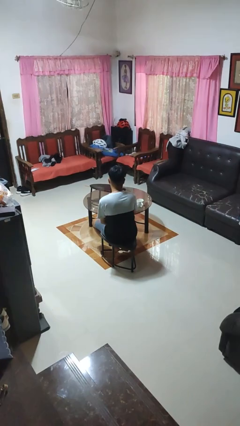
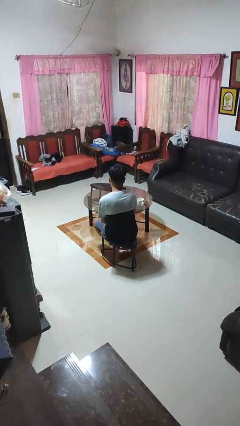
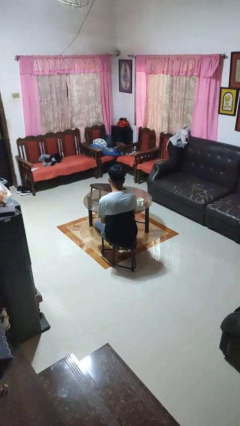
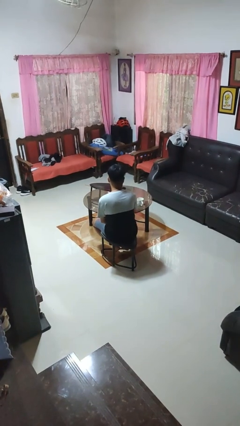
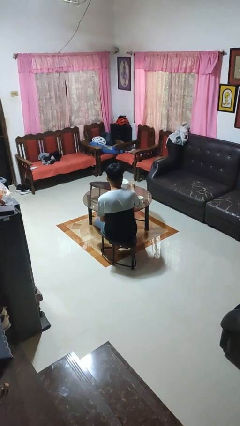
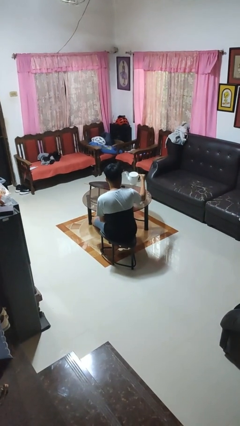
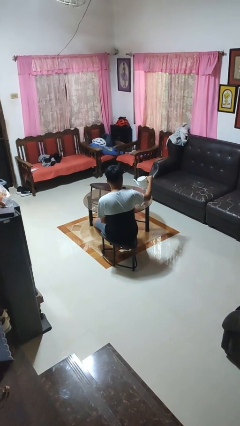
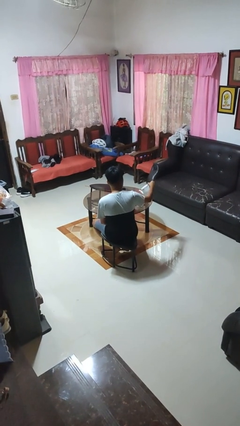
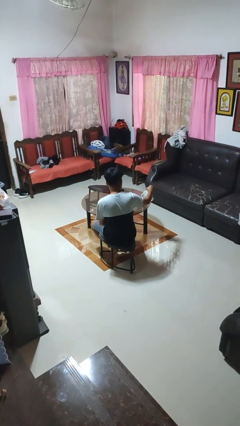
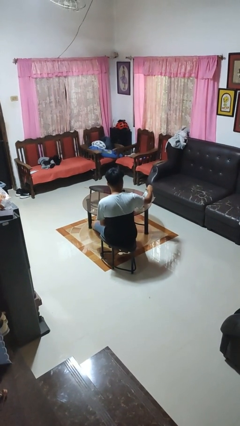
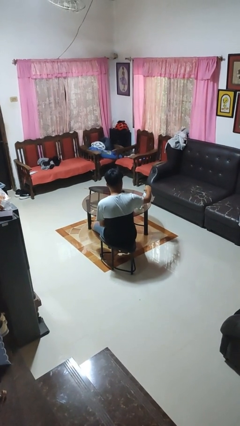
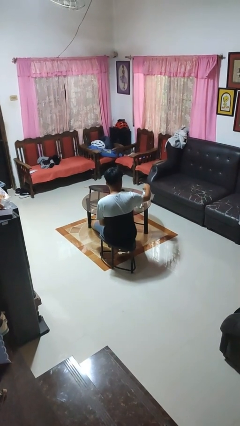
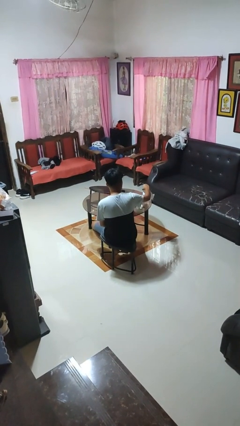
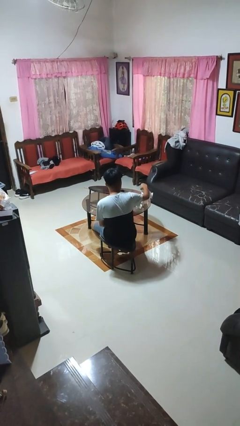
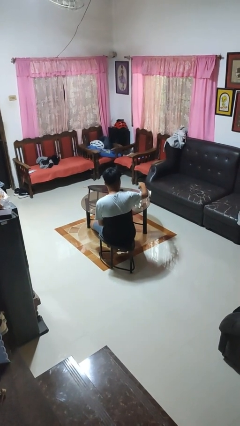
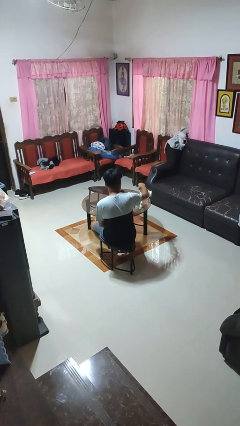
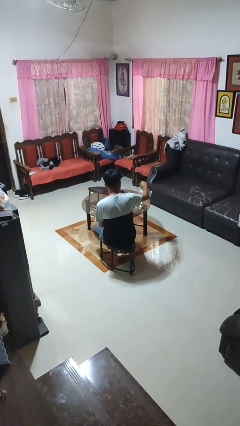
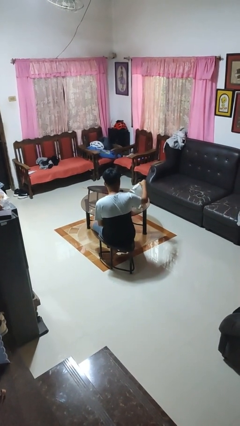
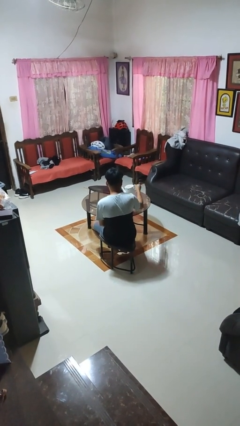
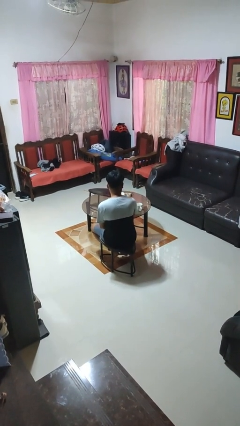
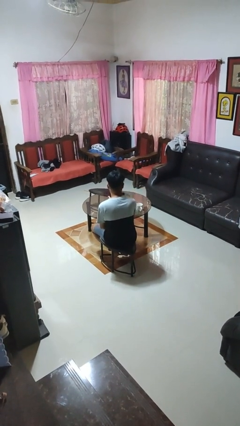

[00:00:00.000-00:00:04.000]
person pours coffee into mug

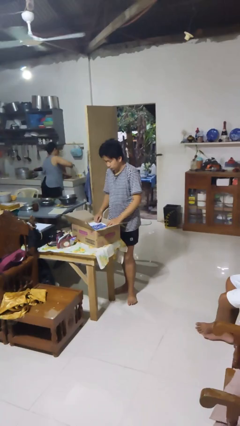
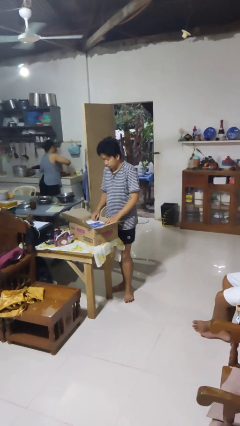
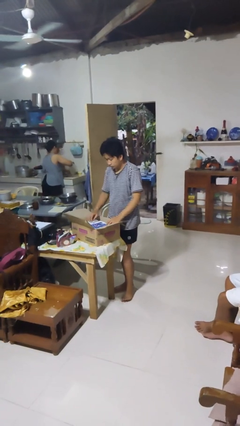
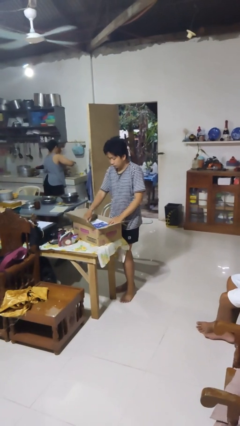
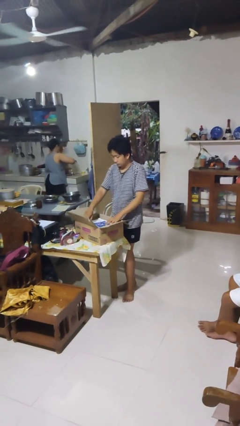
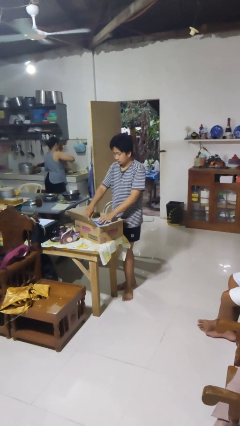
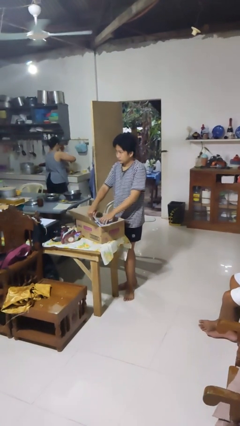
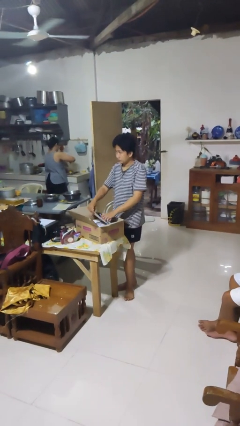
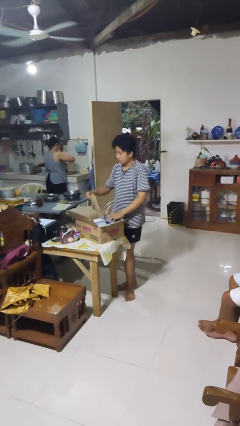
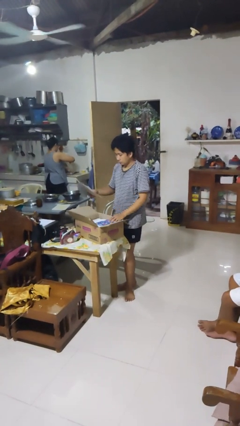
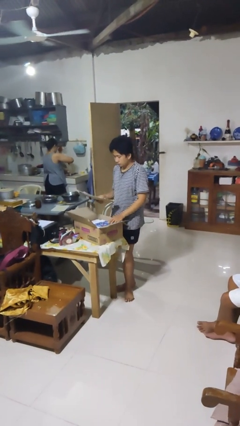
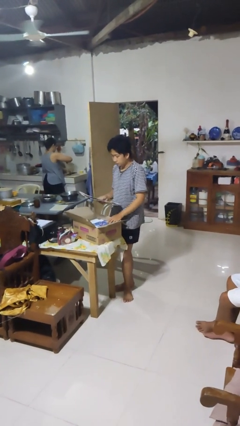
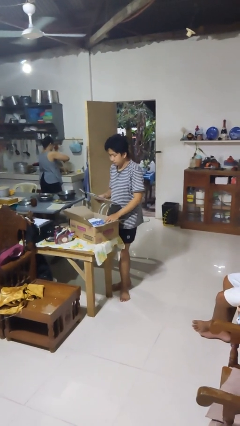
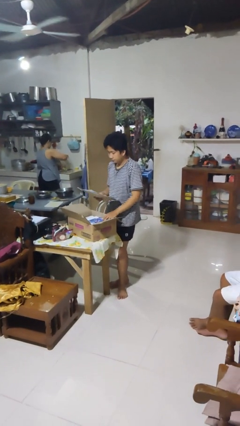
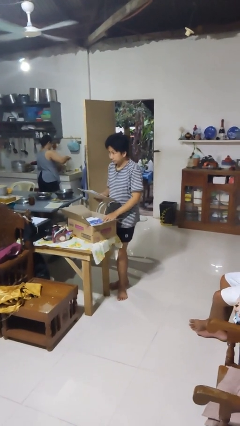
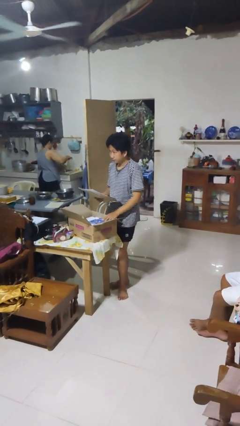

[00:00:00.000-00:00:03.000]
person takes object from box

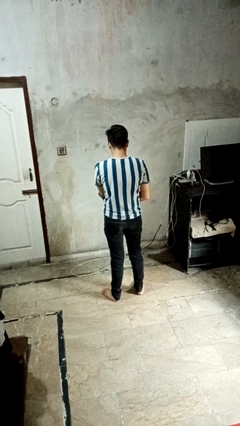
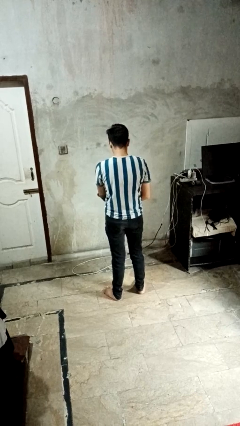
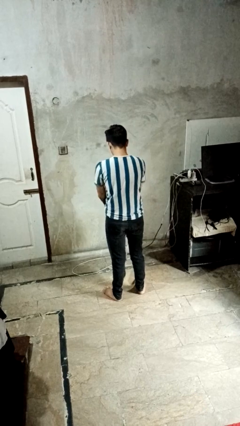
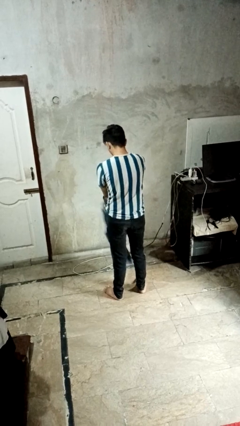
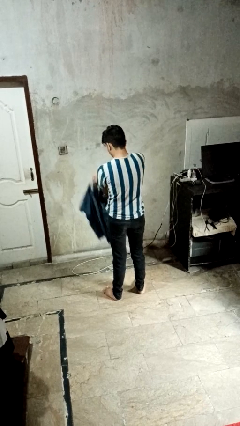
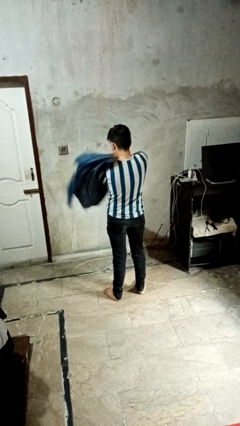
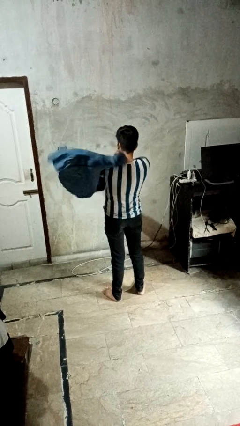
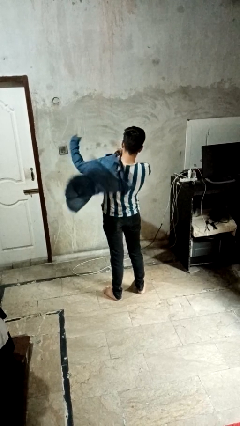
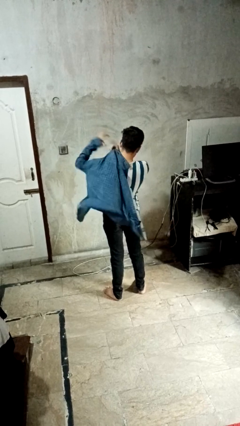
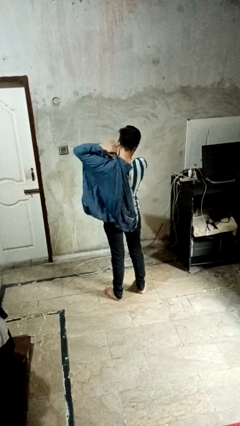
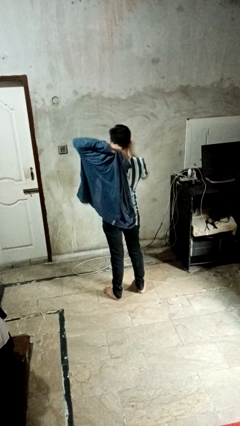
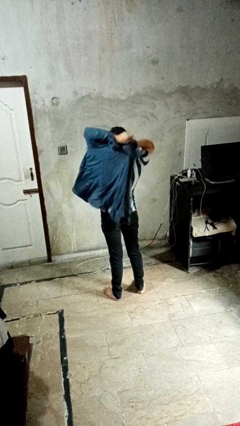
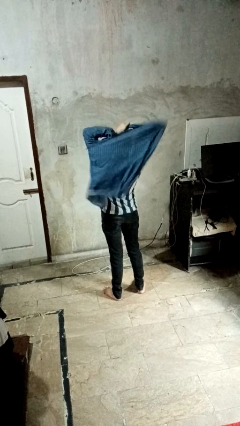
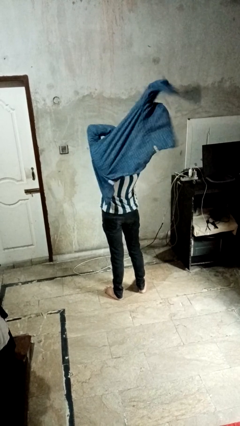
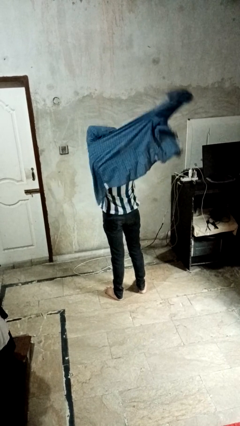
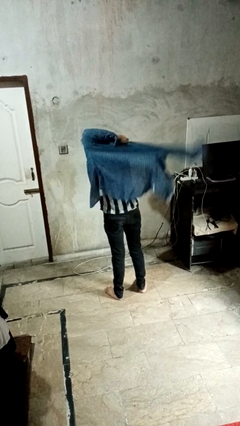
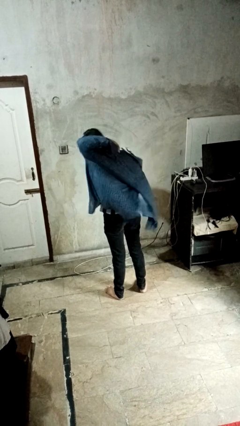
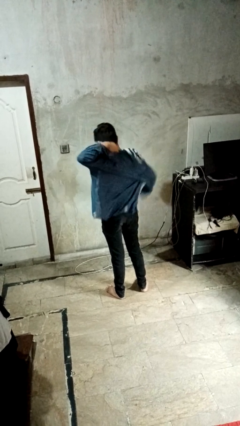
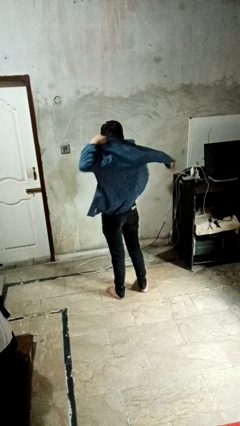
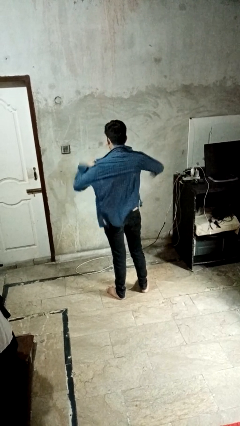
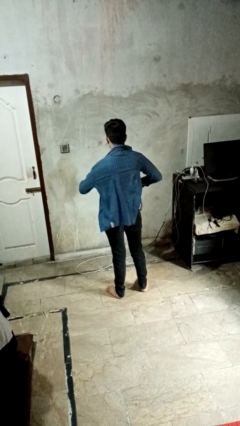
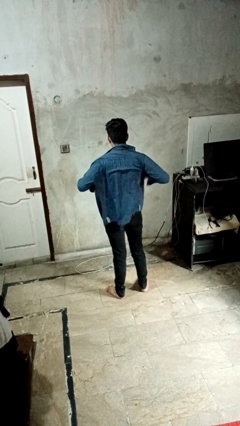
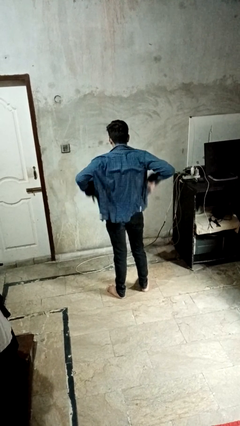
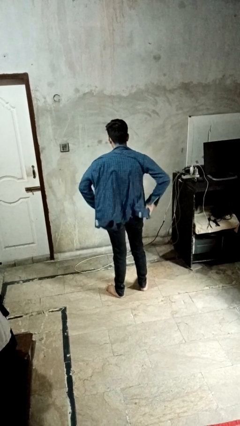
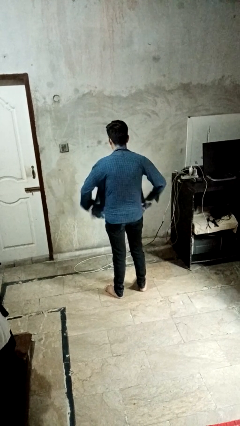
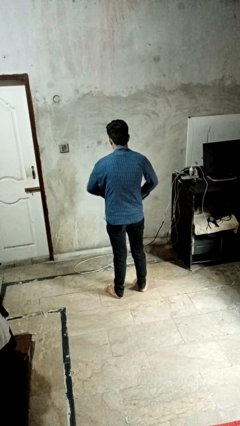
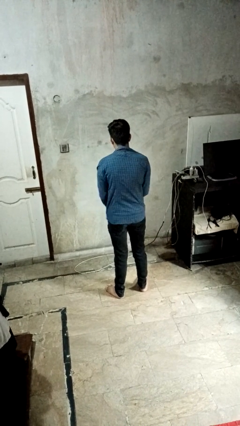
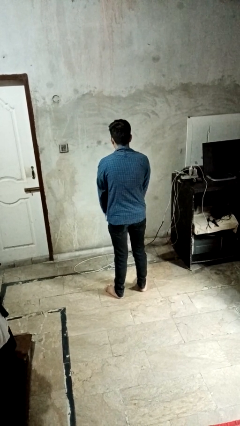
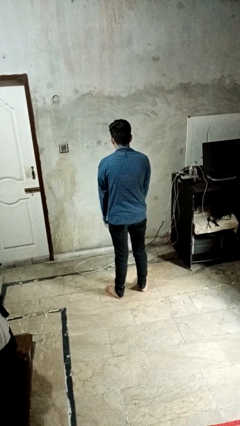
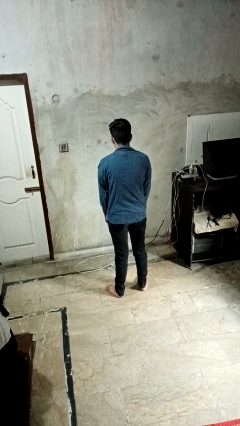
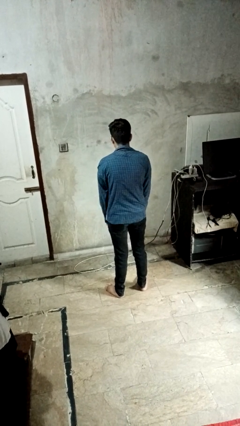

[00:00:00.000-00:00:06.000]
person puts on shirt

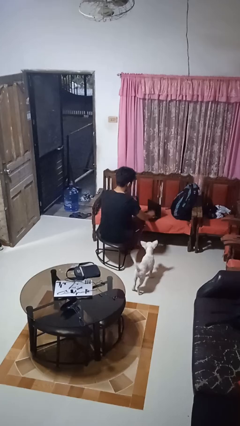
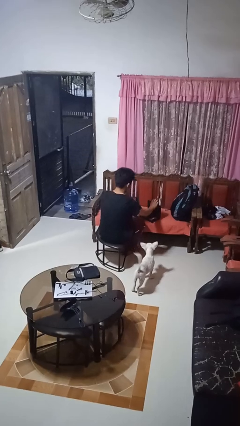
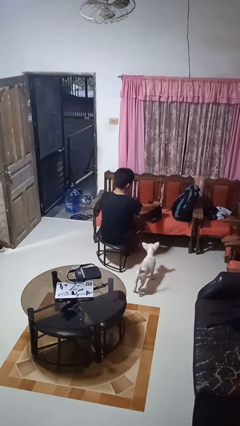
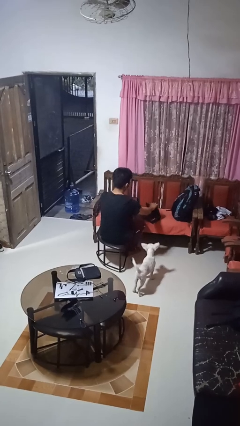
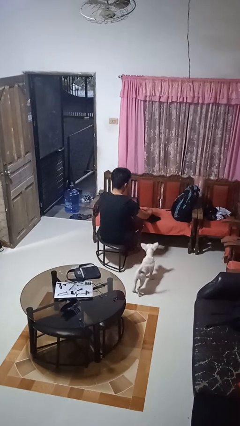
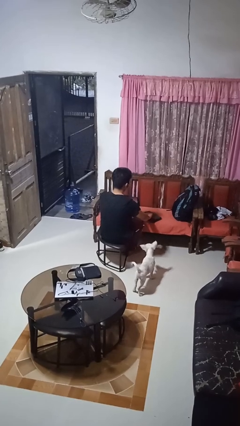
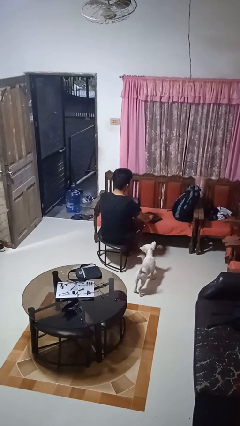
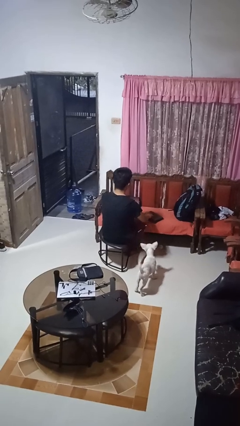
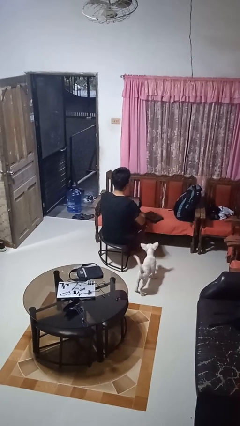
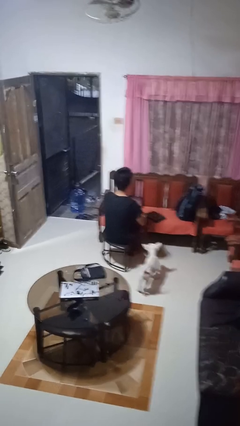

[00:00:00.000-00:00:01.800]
person closes laptop

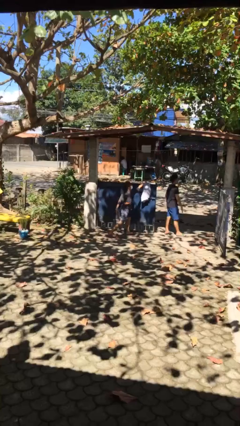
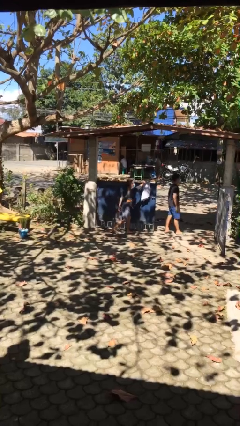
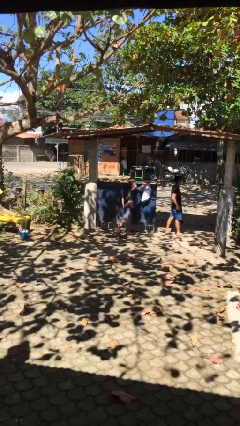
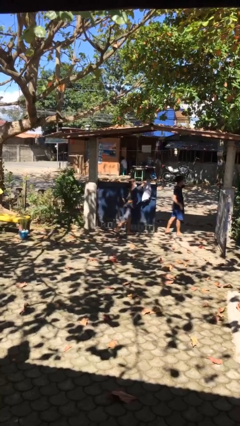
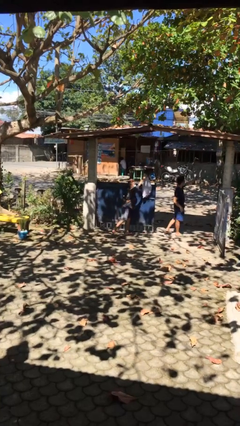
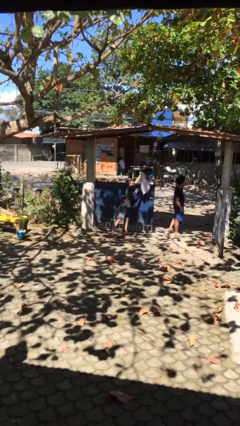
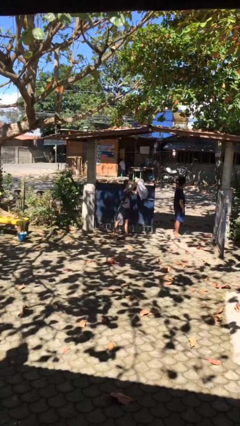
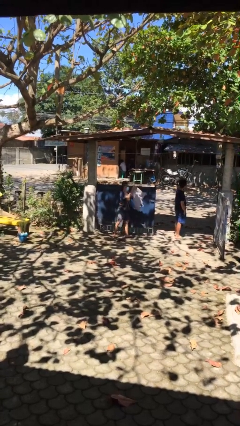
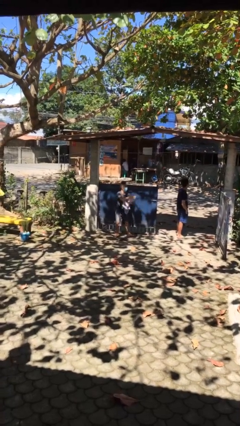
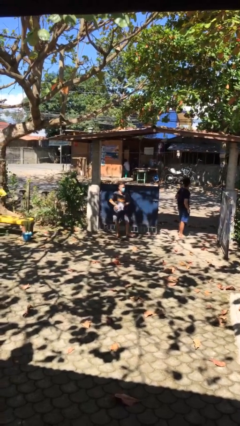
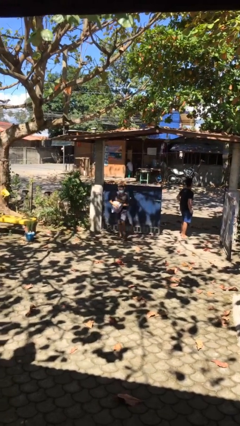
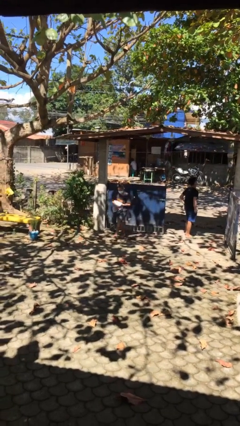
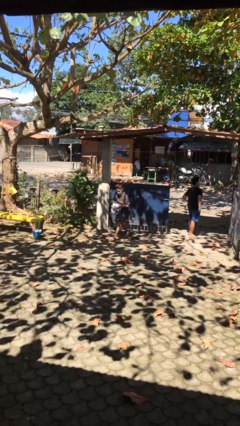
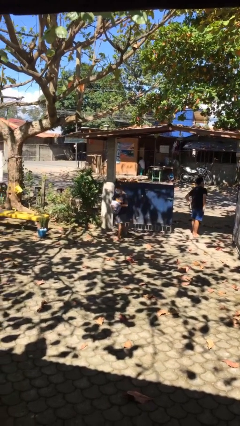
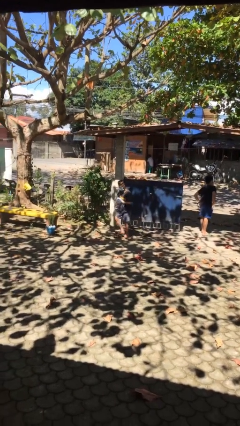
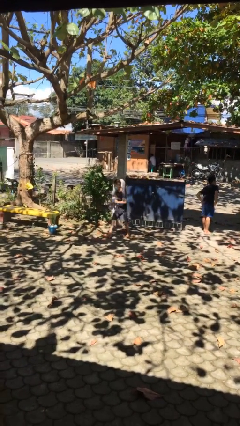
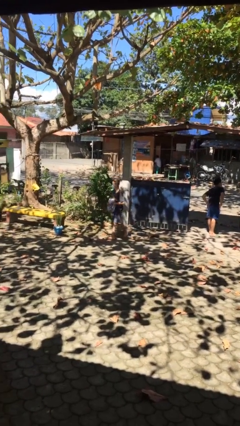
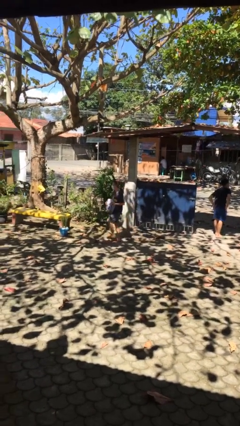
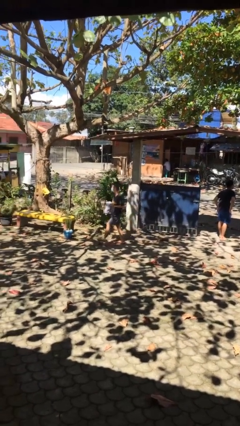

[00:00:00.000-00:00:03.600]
person steals object from person
